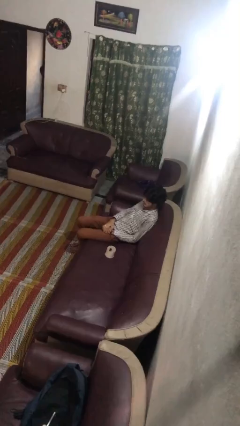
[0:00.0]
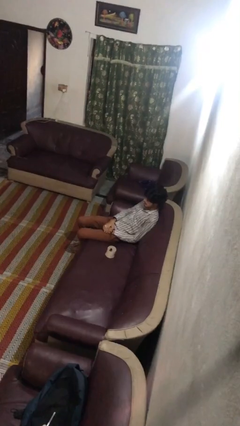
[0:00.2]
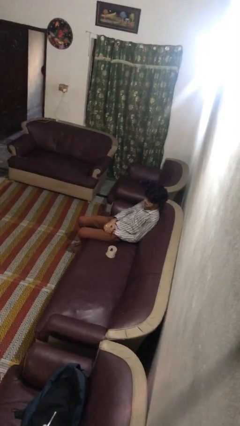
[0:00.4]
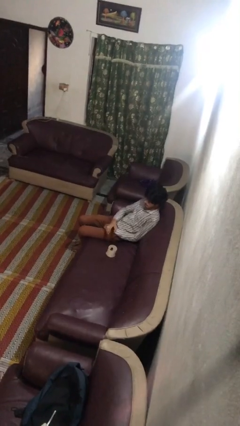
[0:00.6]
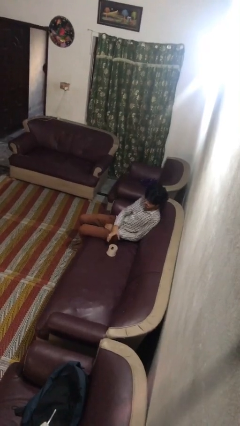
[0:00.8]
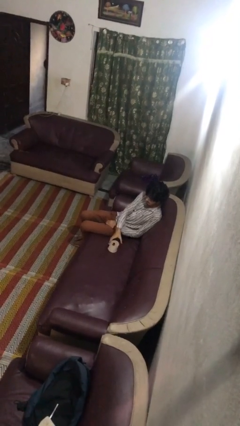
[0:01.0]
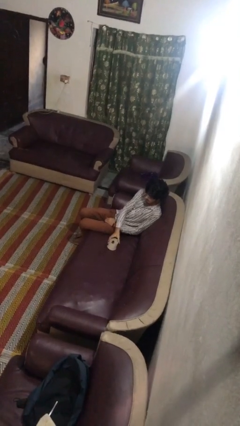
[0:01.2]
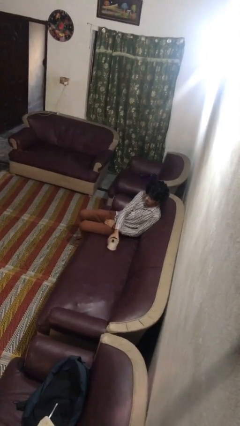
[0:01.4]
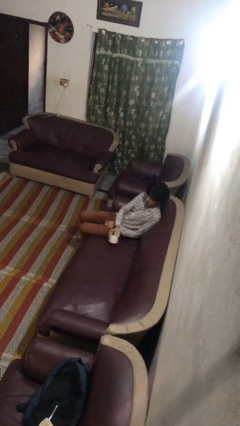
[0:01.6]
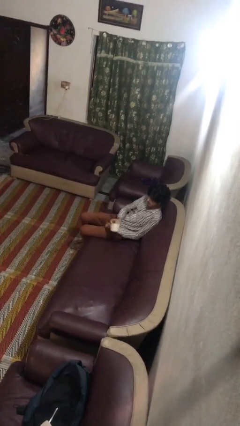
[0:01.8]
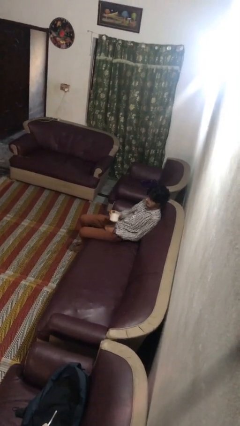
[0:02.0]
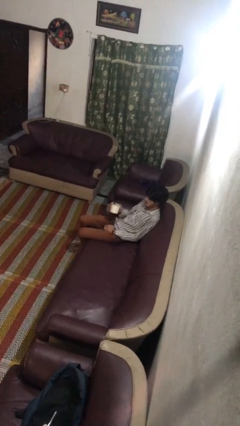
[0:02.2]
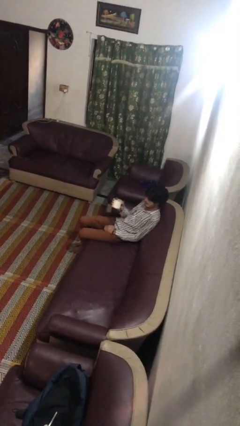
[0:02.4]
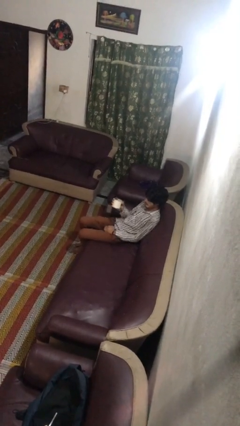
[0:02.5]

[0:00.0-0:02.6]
person picks up object from couch

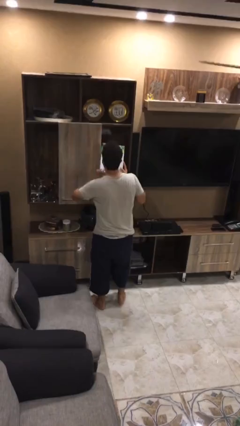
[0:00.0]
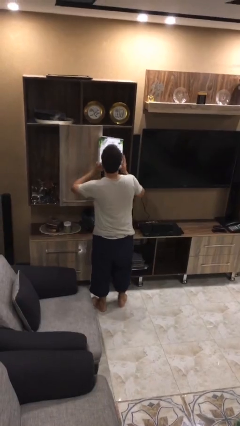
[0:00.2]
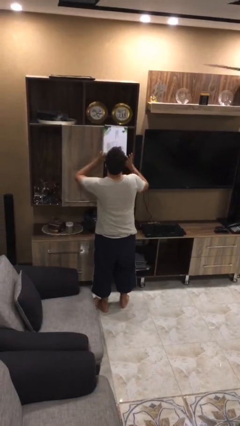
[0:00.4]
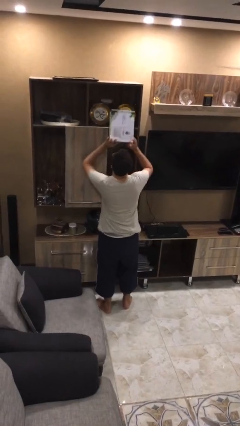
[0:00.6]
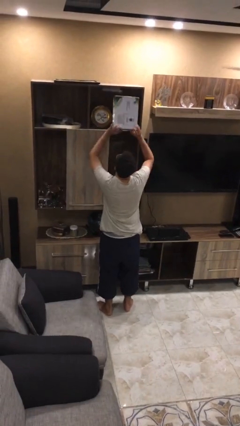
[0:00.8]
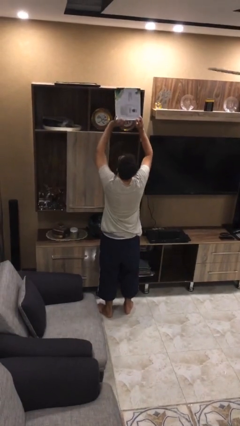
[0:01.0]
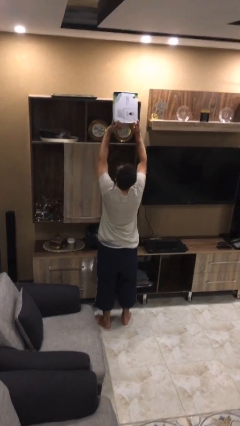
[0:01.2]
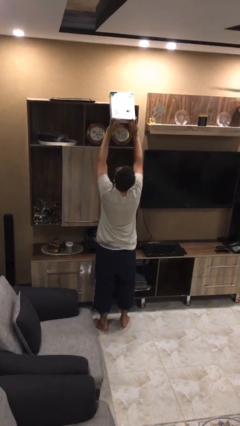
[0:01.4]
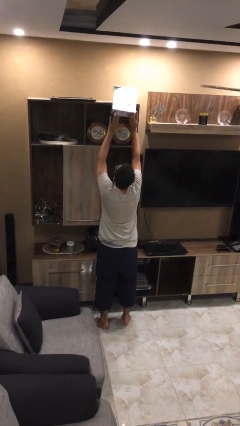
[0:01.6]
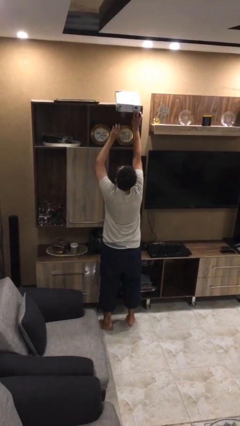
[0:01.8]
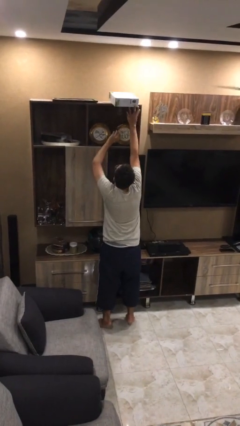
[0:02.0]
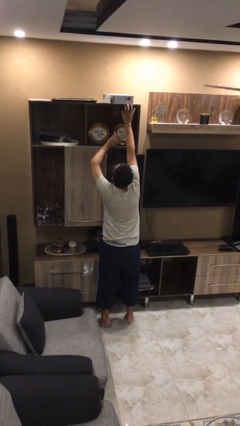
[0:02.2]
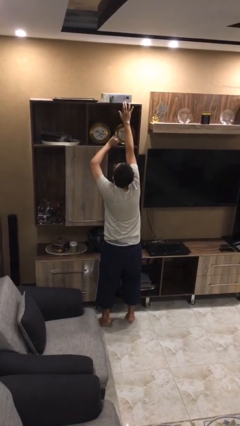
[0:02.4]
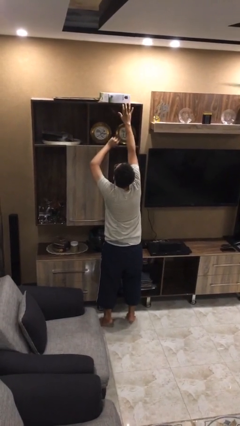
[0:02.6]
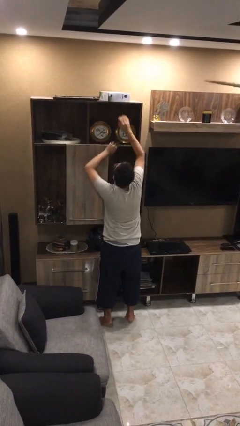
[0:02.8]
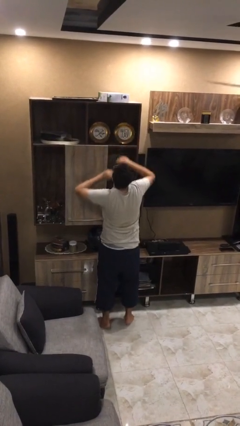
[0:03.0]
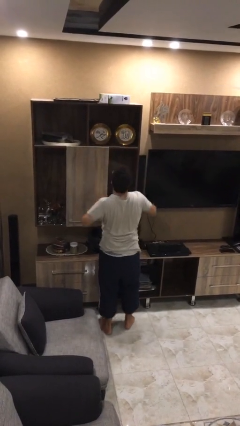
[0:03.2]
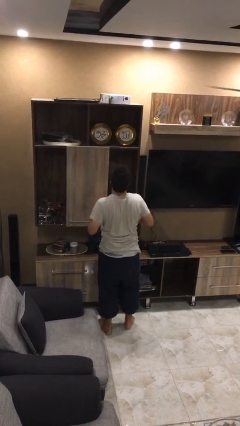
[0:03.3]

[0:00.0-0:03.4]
person puts down object on shelf

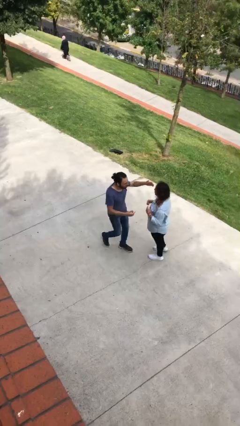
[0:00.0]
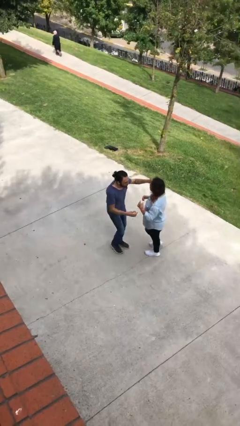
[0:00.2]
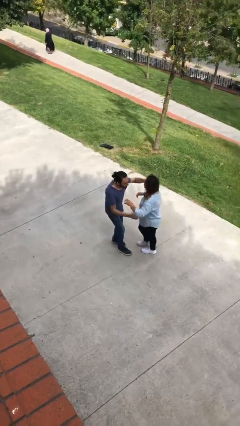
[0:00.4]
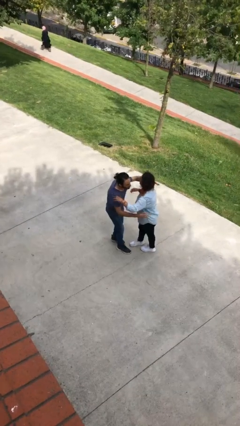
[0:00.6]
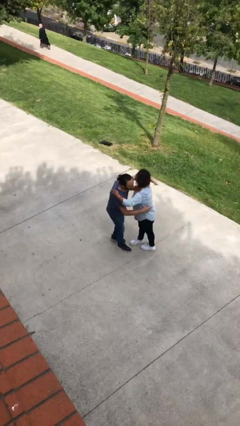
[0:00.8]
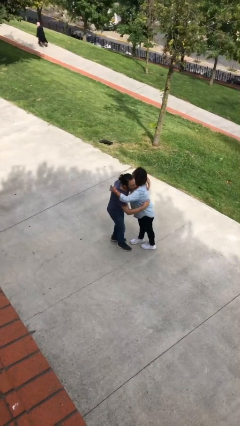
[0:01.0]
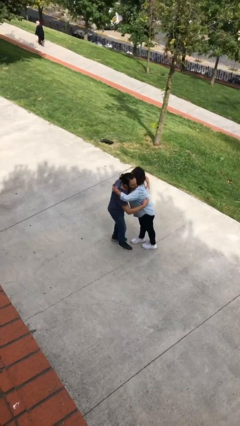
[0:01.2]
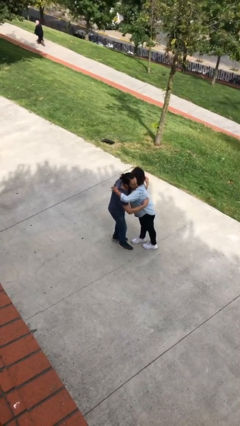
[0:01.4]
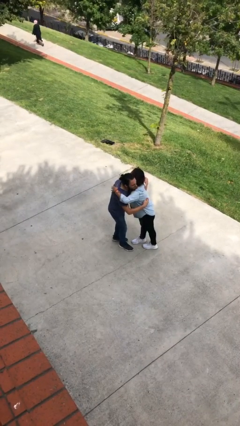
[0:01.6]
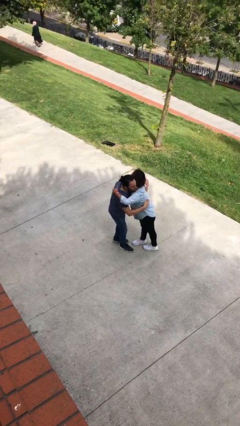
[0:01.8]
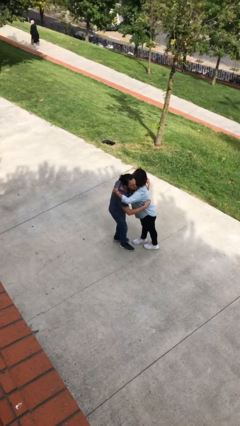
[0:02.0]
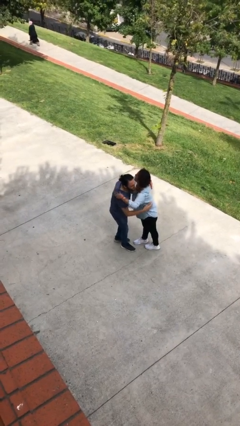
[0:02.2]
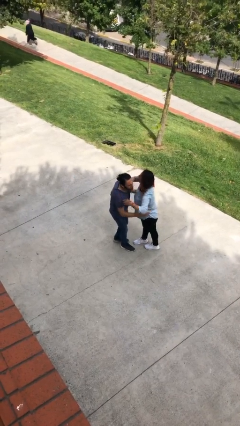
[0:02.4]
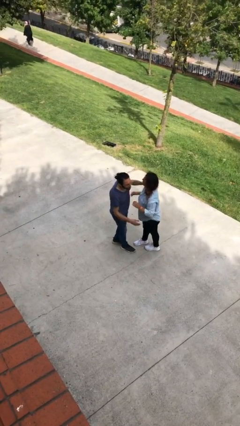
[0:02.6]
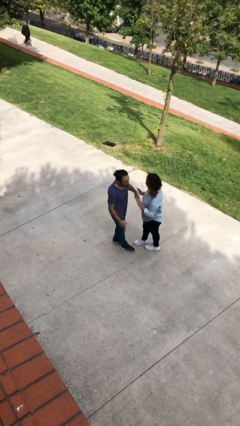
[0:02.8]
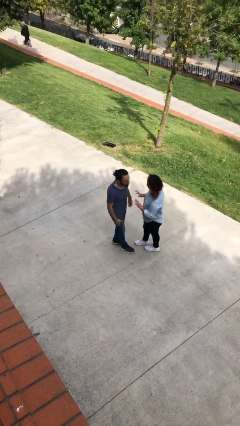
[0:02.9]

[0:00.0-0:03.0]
person embraces person

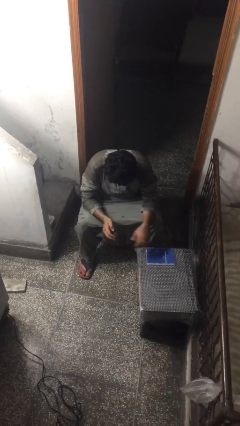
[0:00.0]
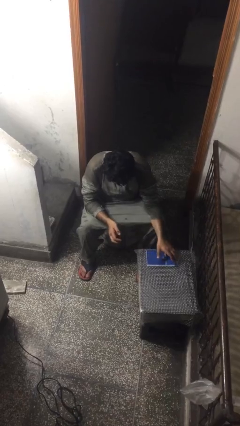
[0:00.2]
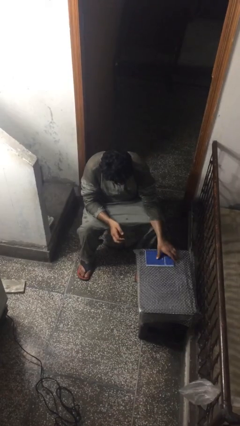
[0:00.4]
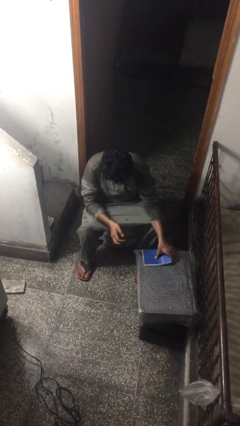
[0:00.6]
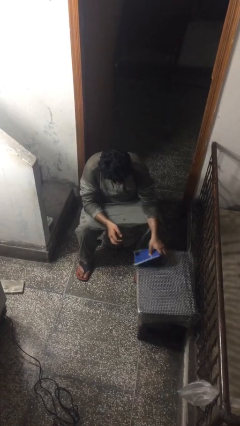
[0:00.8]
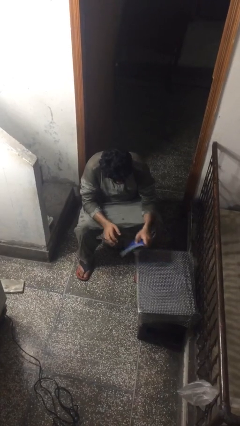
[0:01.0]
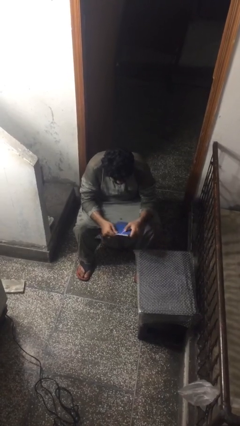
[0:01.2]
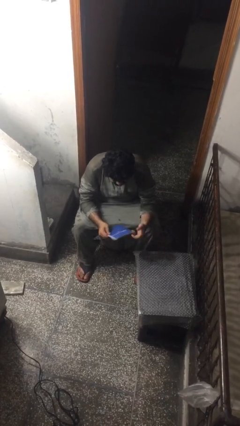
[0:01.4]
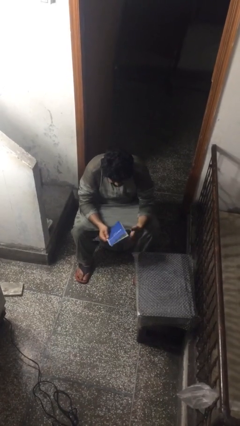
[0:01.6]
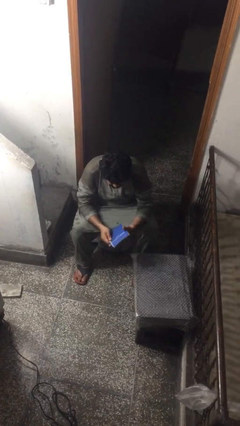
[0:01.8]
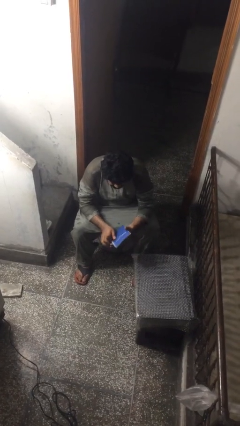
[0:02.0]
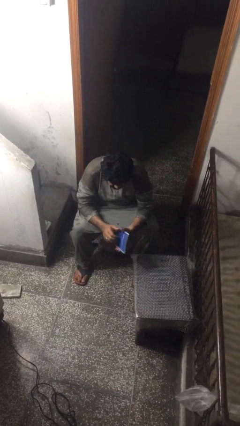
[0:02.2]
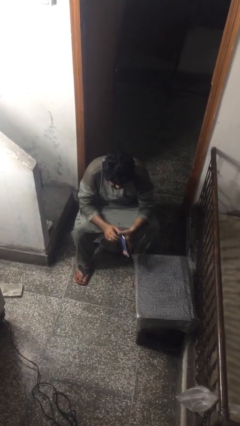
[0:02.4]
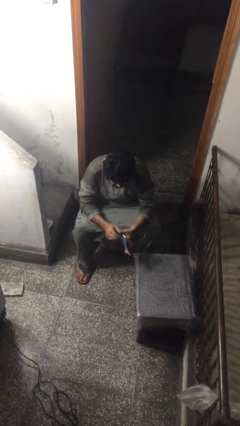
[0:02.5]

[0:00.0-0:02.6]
person picks up object from table

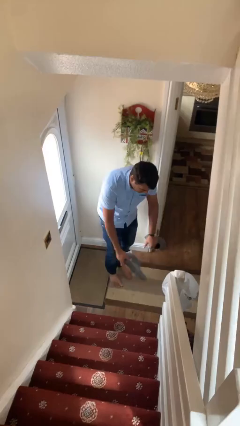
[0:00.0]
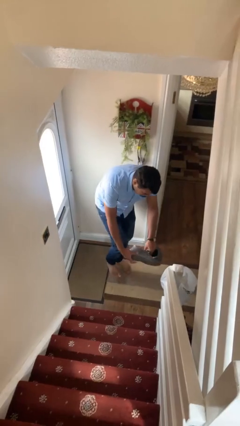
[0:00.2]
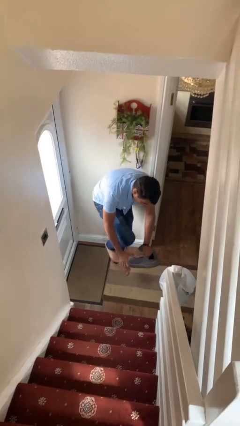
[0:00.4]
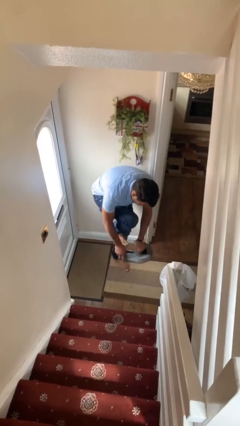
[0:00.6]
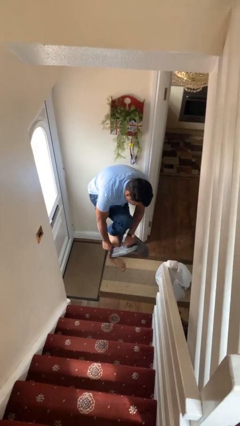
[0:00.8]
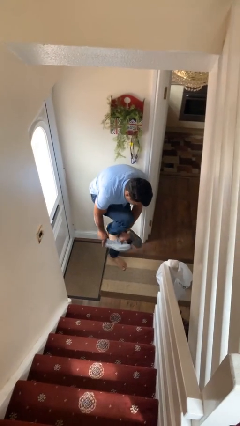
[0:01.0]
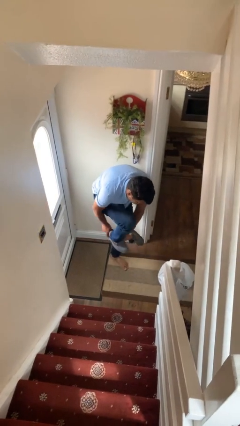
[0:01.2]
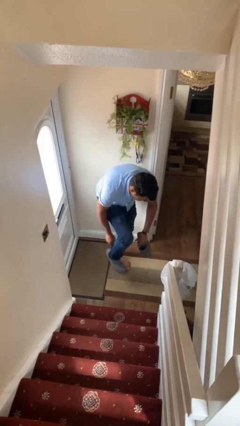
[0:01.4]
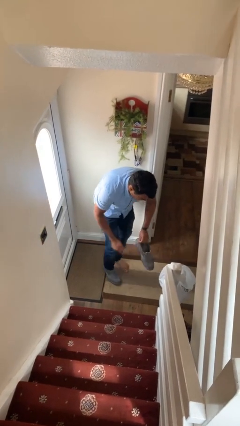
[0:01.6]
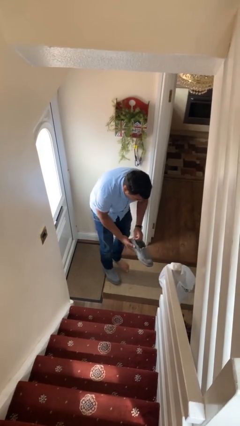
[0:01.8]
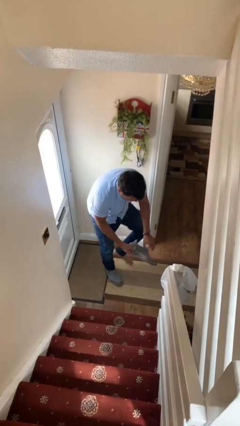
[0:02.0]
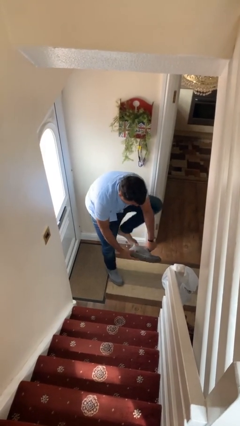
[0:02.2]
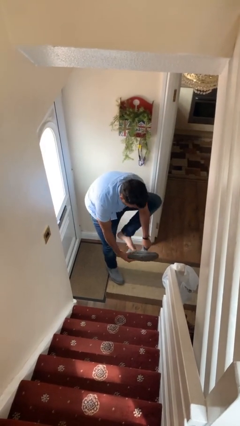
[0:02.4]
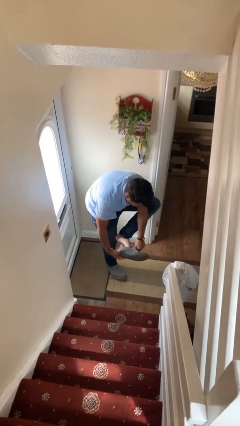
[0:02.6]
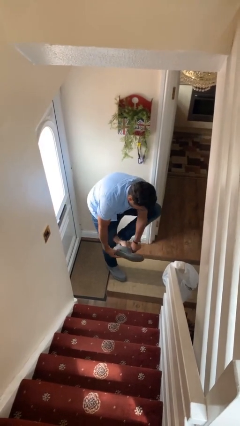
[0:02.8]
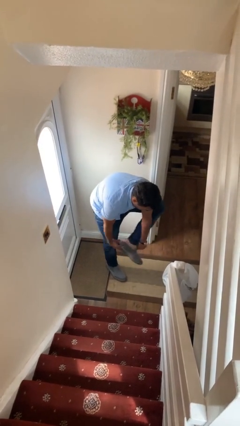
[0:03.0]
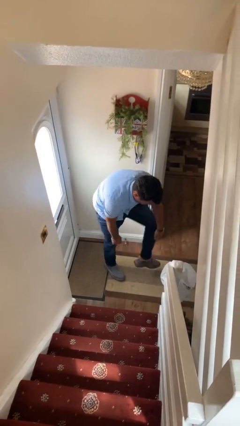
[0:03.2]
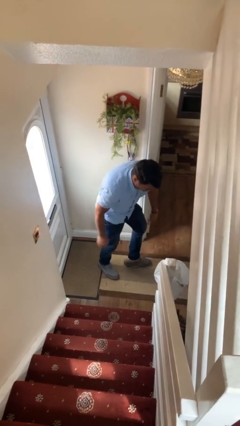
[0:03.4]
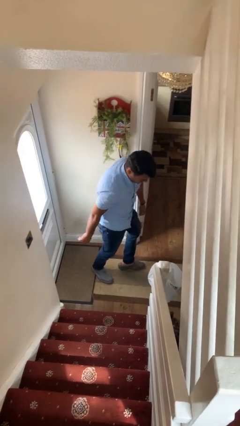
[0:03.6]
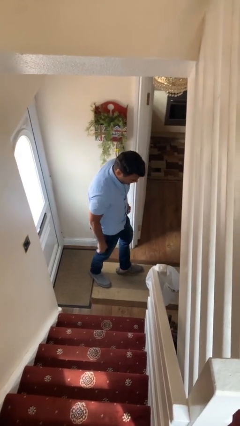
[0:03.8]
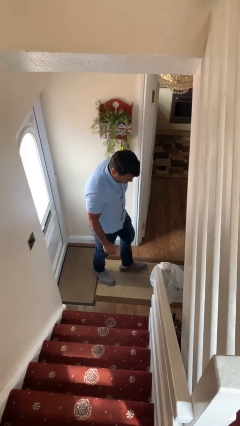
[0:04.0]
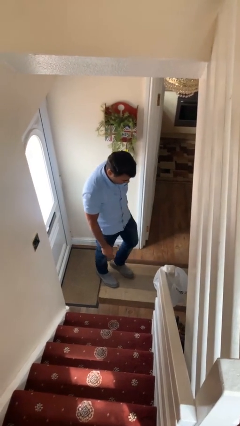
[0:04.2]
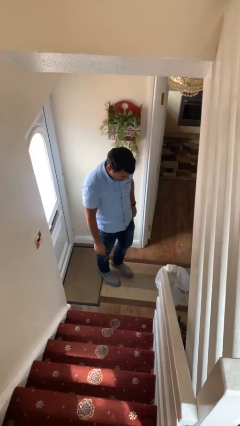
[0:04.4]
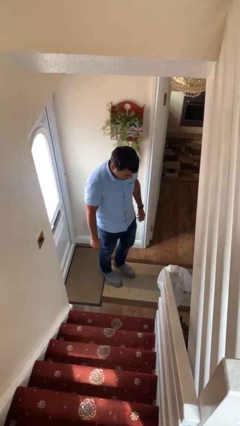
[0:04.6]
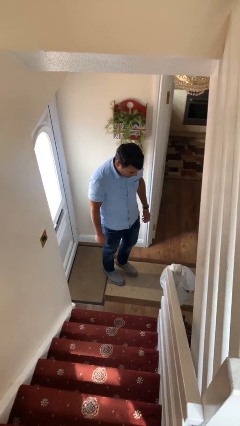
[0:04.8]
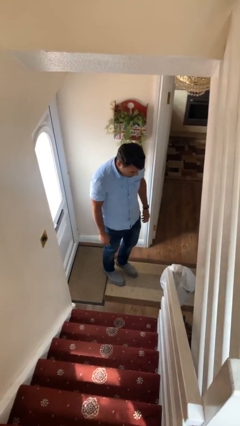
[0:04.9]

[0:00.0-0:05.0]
person puts on shoes

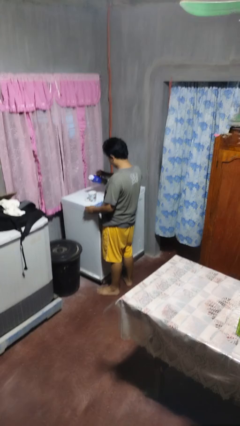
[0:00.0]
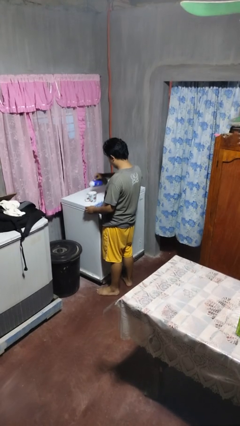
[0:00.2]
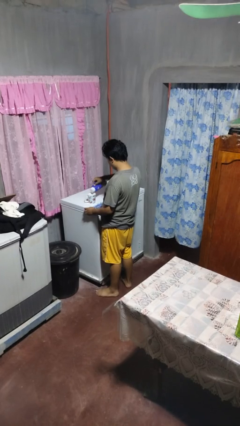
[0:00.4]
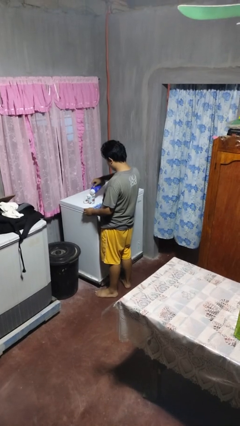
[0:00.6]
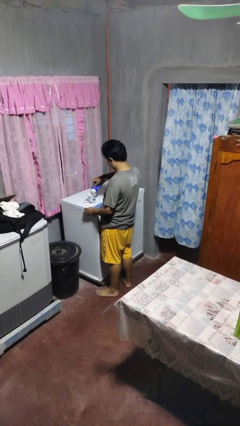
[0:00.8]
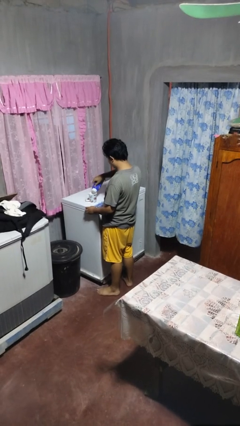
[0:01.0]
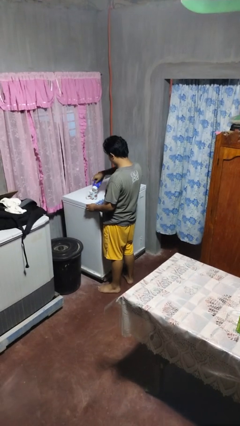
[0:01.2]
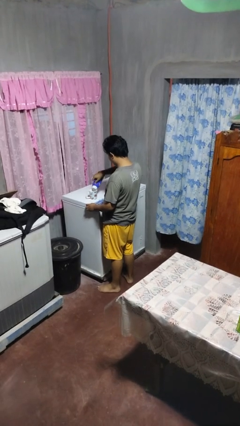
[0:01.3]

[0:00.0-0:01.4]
person pours coffee into mug
